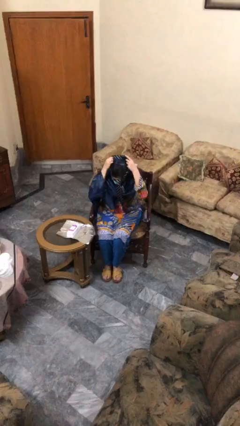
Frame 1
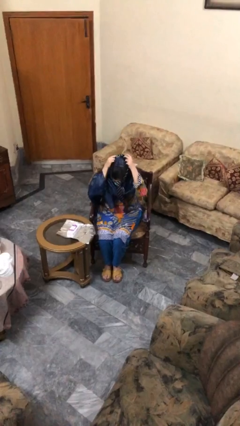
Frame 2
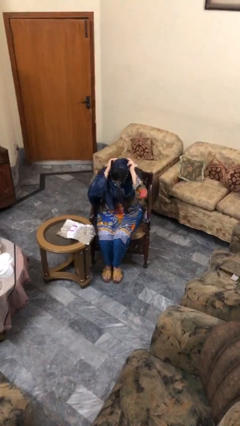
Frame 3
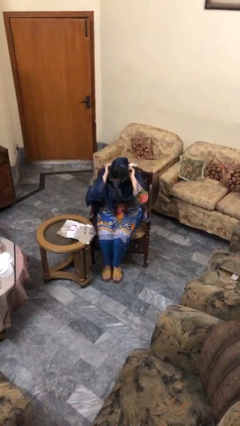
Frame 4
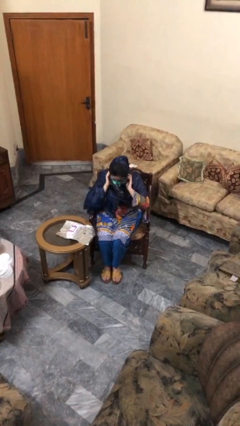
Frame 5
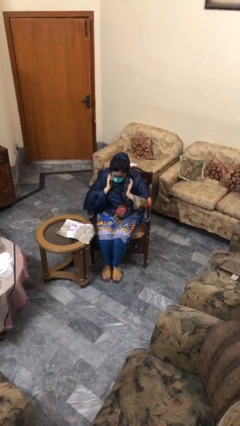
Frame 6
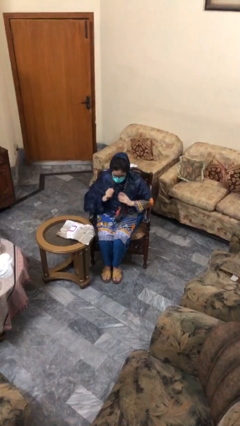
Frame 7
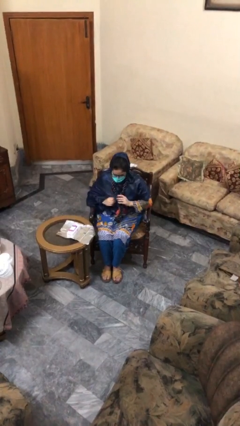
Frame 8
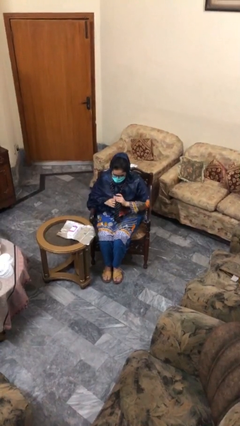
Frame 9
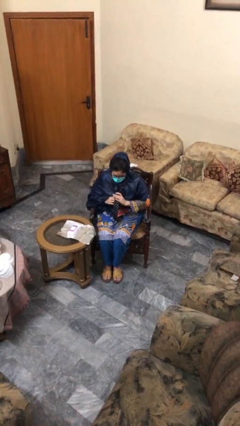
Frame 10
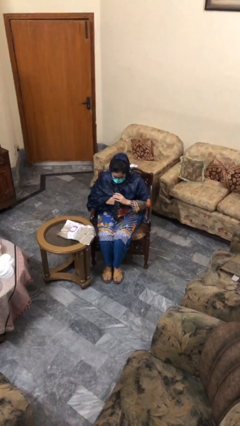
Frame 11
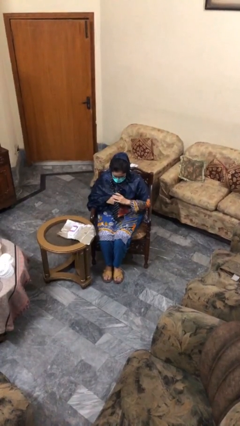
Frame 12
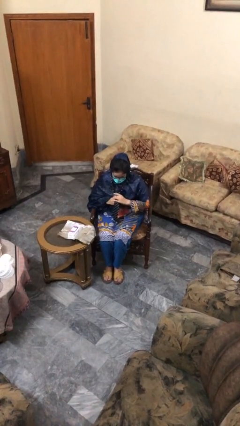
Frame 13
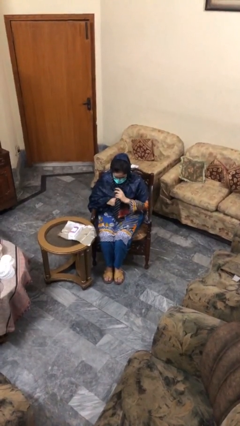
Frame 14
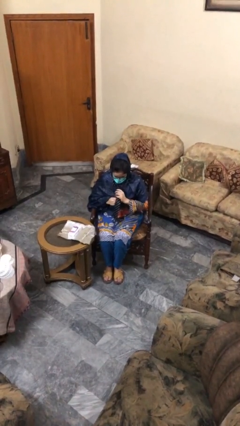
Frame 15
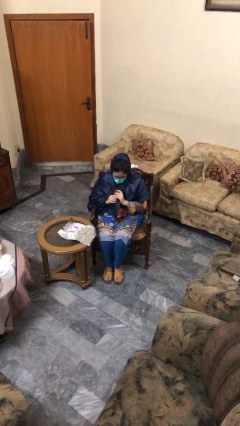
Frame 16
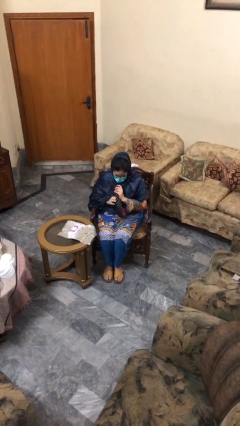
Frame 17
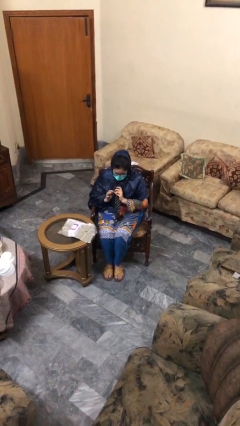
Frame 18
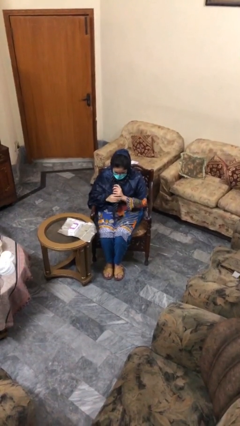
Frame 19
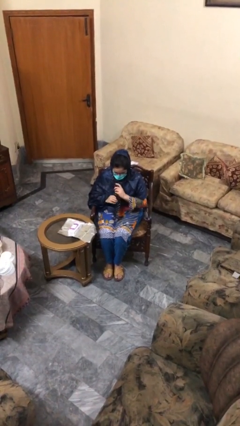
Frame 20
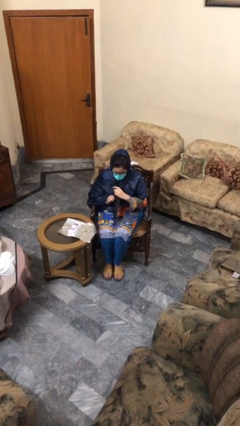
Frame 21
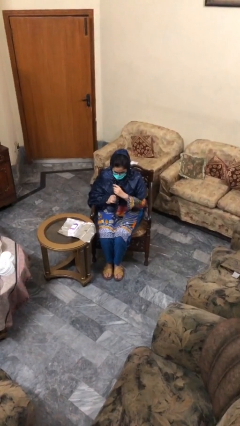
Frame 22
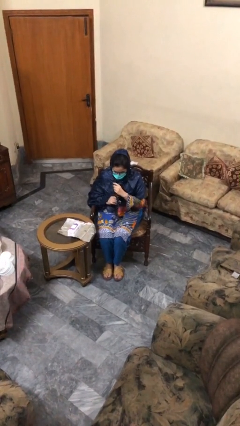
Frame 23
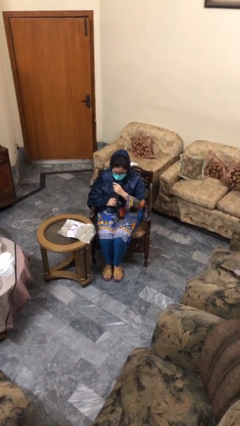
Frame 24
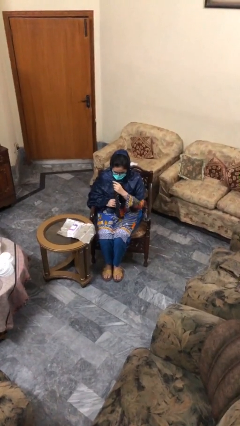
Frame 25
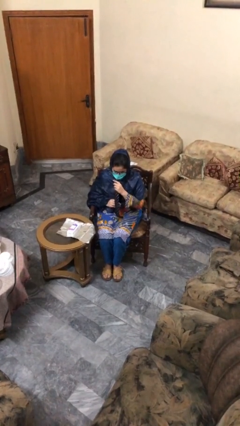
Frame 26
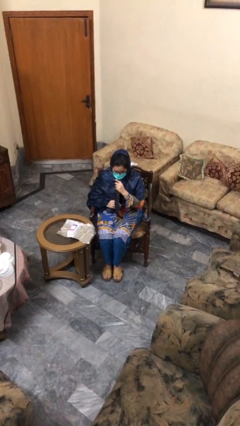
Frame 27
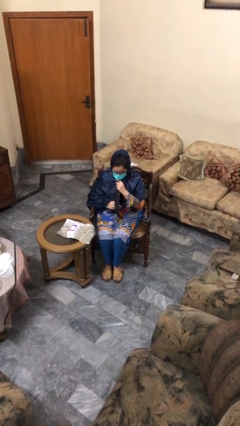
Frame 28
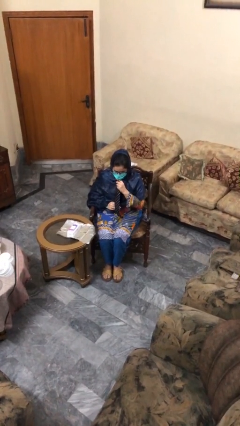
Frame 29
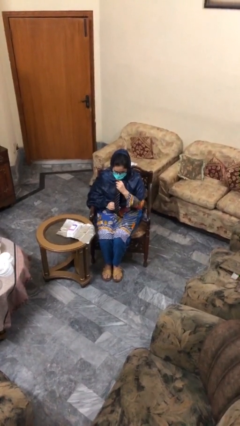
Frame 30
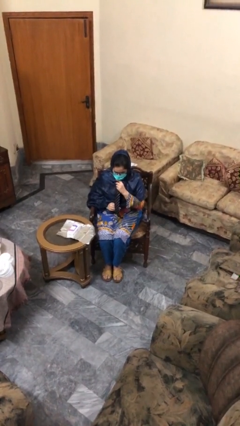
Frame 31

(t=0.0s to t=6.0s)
person puts on necktie

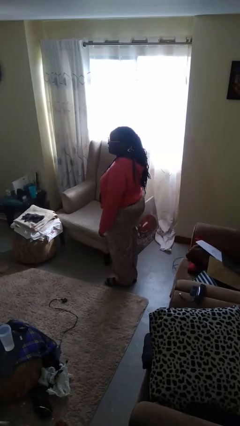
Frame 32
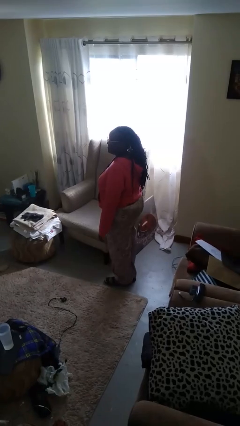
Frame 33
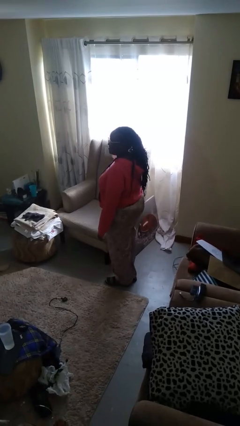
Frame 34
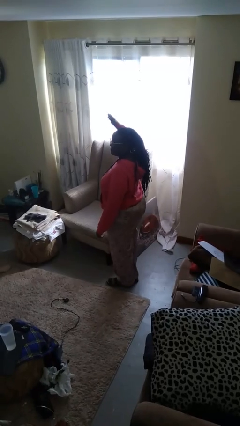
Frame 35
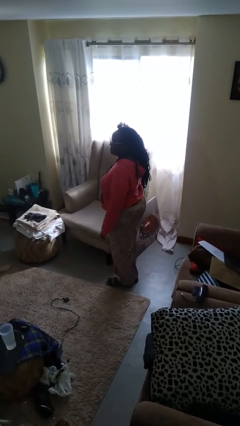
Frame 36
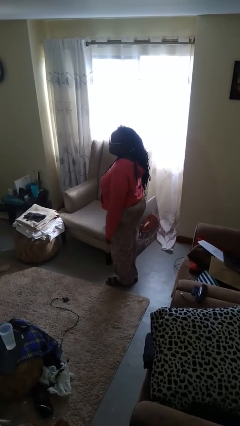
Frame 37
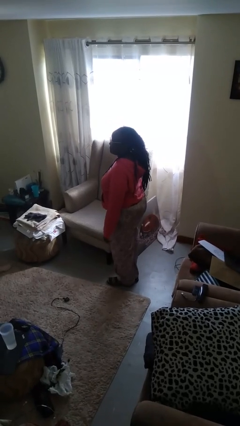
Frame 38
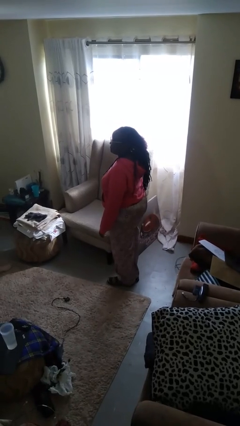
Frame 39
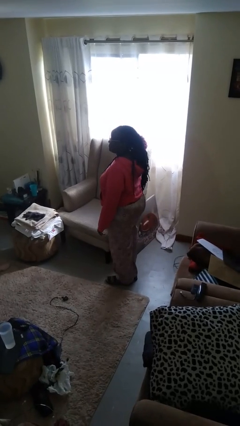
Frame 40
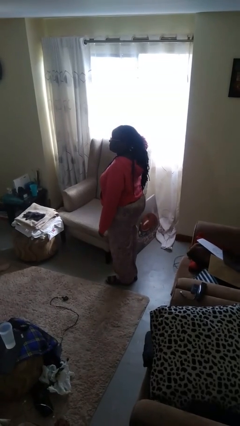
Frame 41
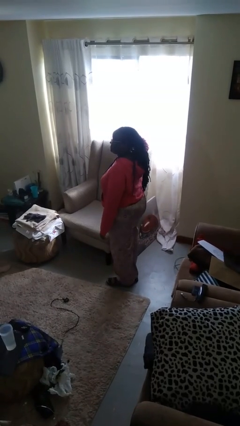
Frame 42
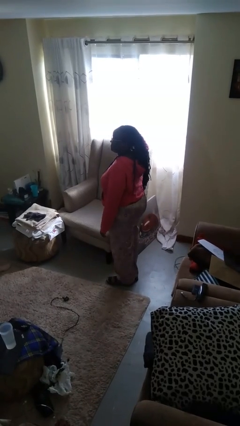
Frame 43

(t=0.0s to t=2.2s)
person salutes

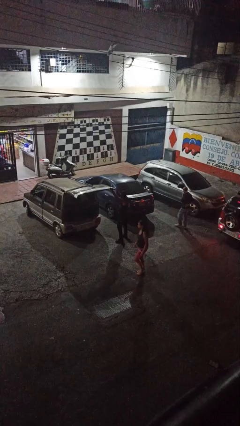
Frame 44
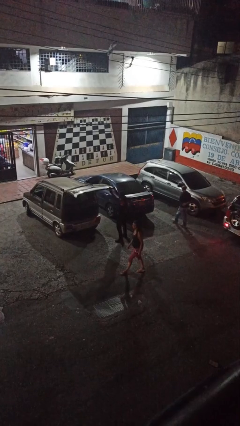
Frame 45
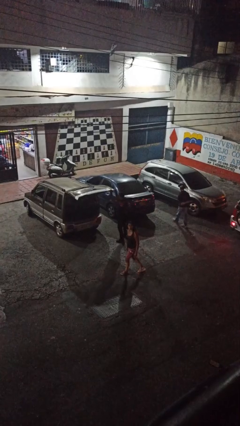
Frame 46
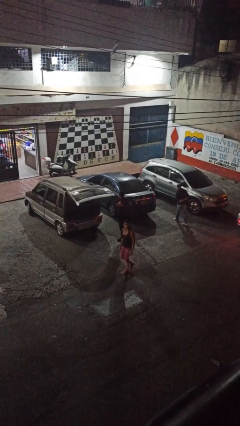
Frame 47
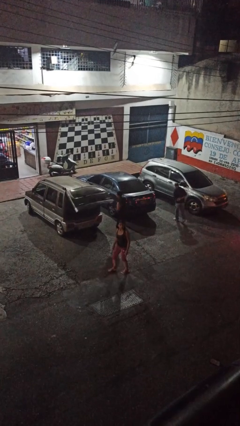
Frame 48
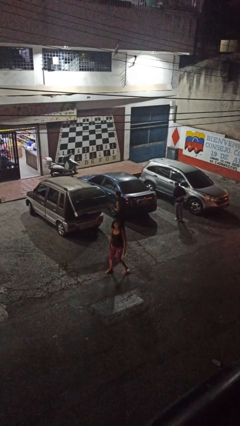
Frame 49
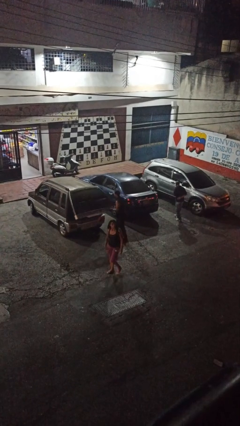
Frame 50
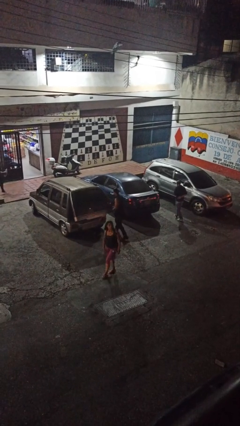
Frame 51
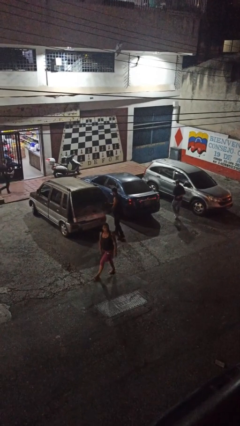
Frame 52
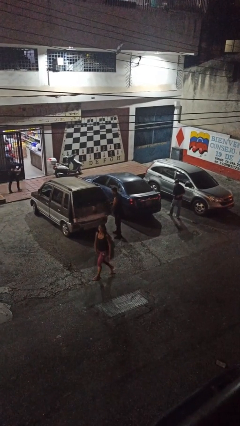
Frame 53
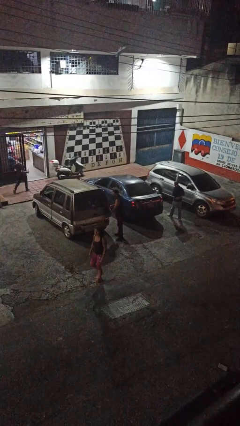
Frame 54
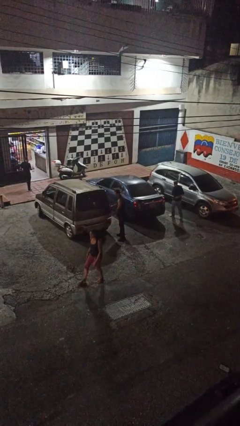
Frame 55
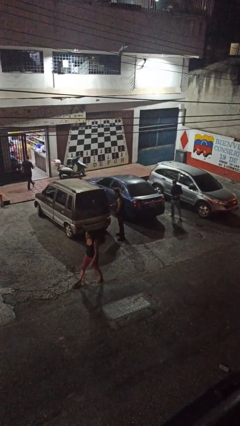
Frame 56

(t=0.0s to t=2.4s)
person closes car trunk

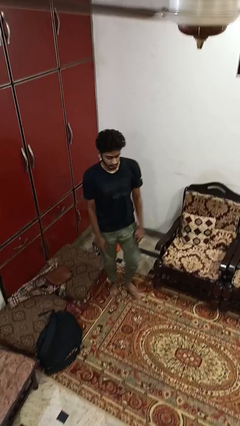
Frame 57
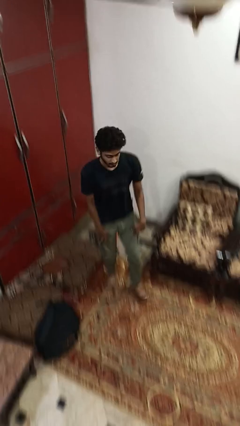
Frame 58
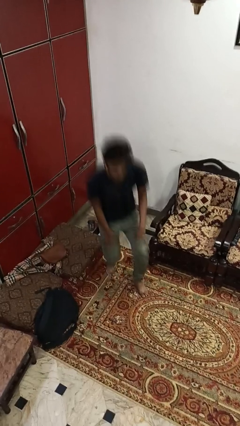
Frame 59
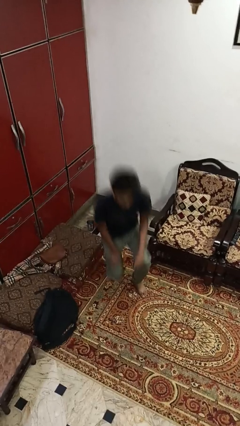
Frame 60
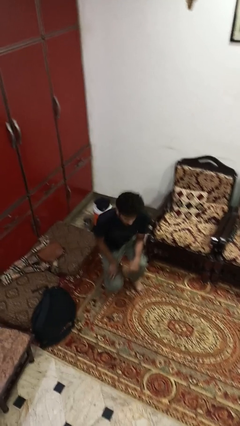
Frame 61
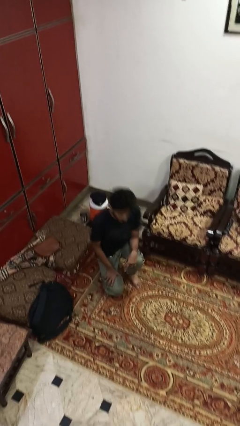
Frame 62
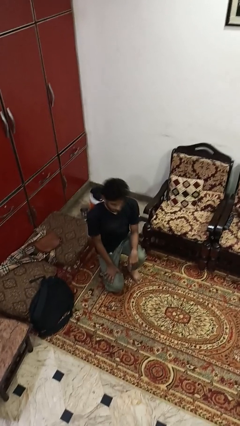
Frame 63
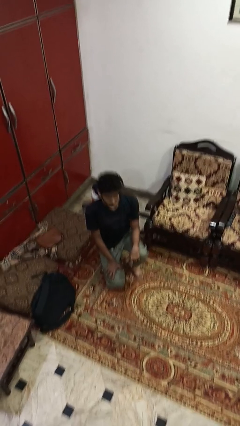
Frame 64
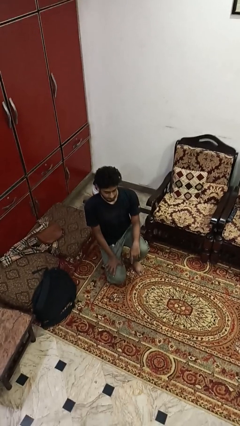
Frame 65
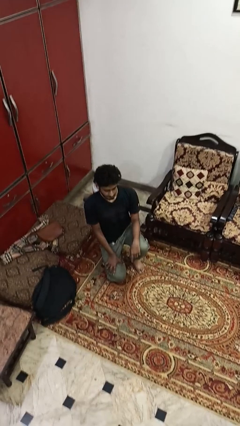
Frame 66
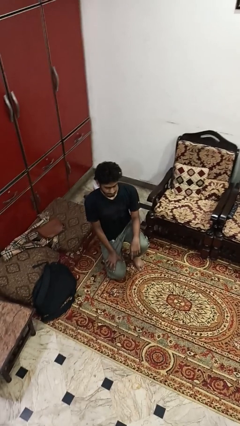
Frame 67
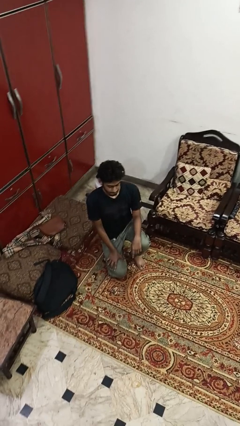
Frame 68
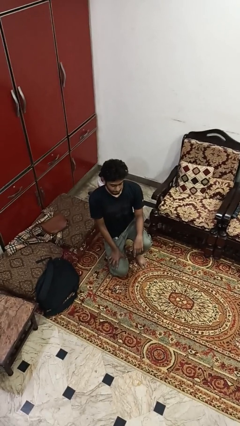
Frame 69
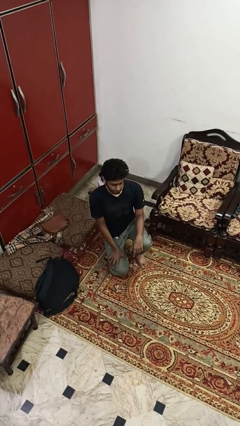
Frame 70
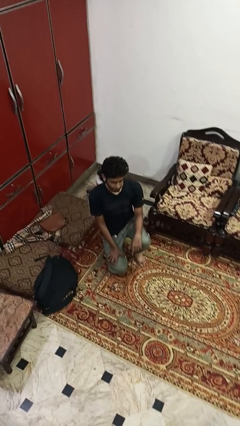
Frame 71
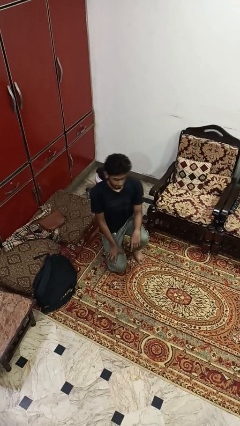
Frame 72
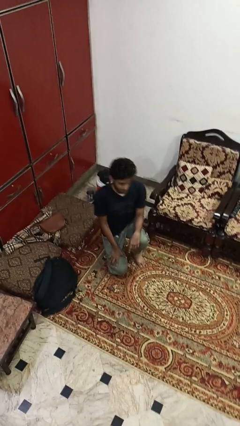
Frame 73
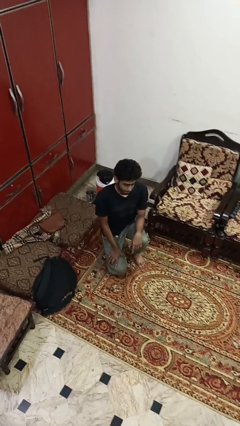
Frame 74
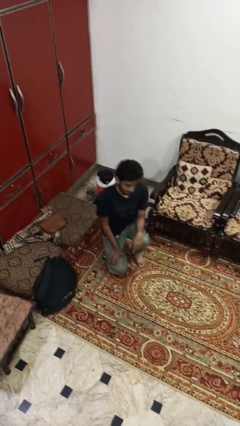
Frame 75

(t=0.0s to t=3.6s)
person kneels

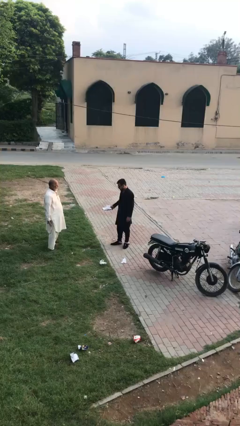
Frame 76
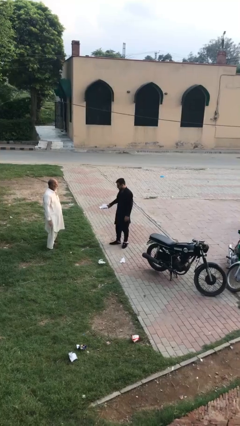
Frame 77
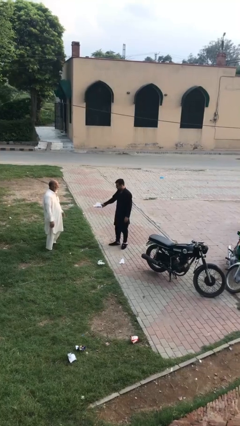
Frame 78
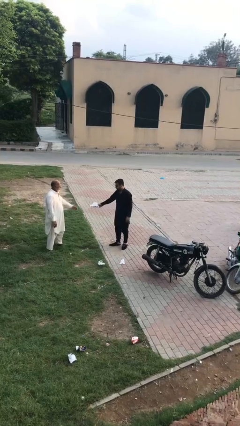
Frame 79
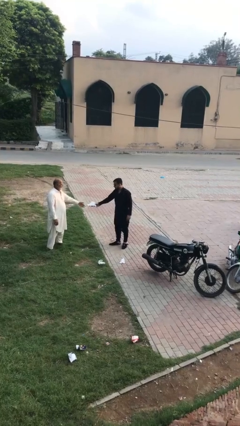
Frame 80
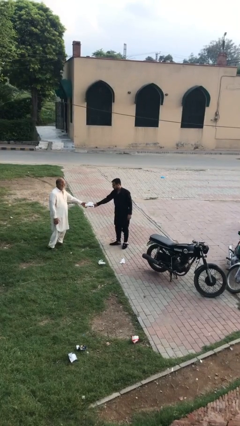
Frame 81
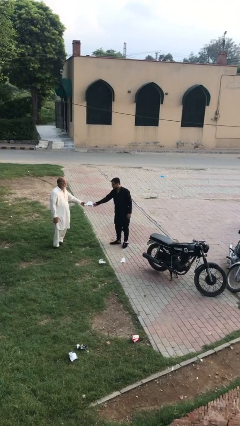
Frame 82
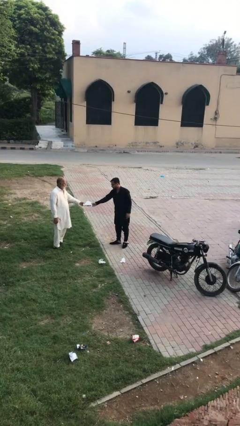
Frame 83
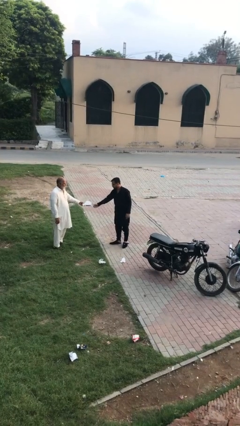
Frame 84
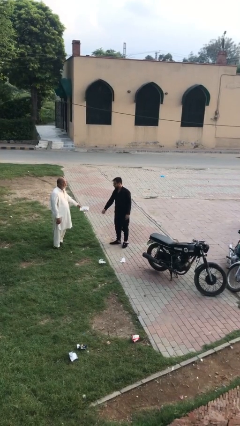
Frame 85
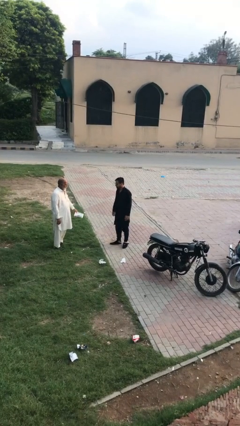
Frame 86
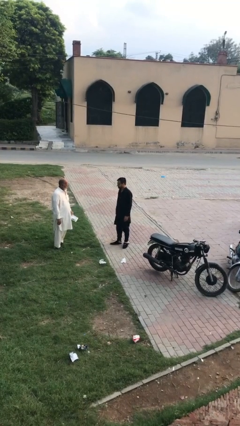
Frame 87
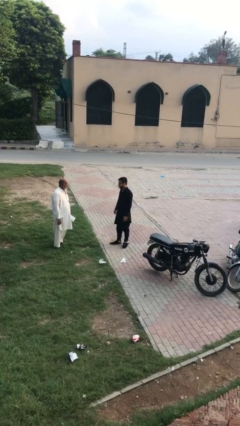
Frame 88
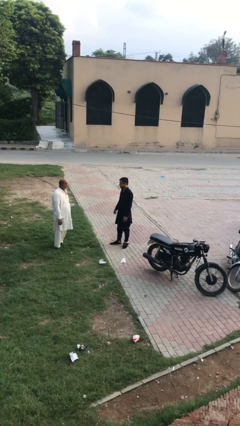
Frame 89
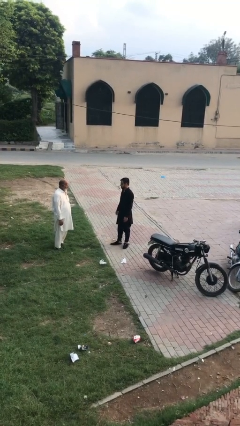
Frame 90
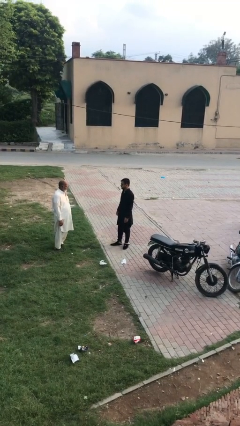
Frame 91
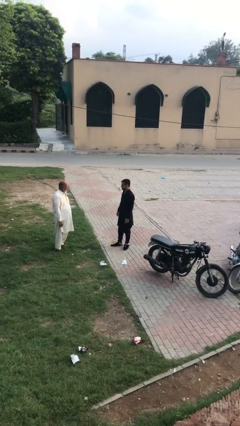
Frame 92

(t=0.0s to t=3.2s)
person transfers object to person
